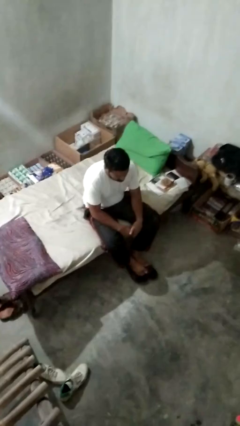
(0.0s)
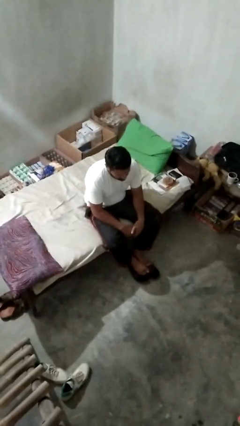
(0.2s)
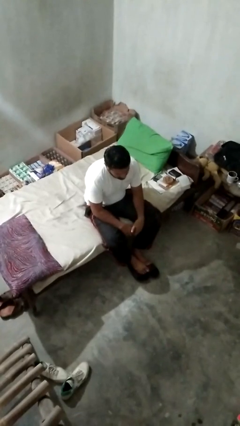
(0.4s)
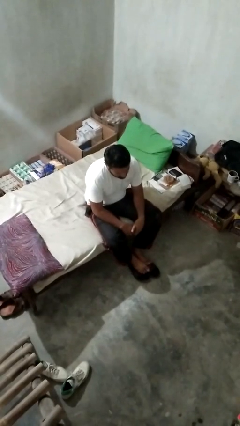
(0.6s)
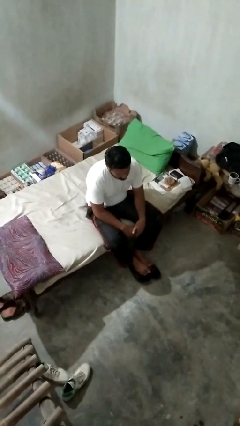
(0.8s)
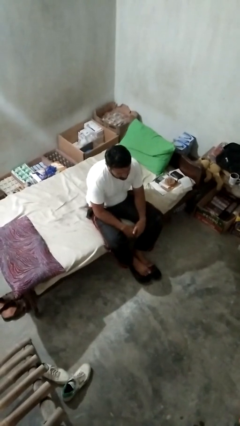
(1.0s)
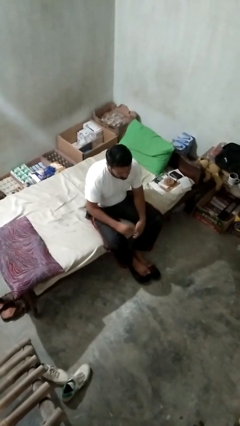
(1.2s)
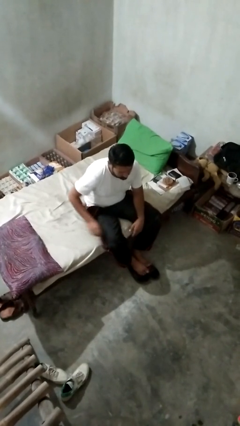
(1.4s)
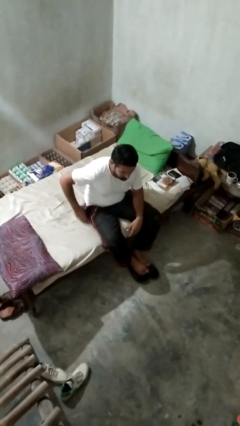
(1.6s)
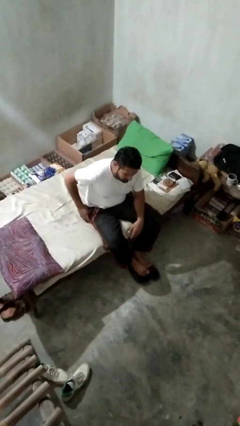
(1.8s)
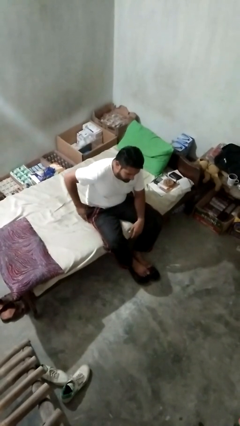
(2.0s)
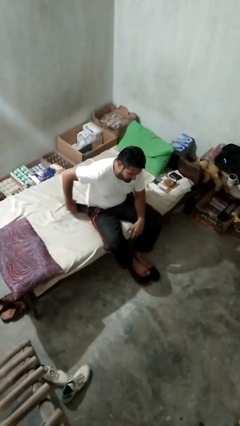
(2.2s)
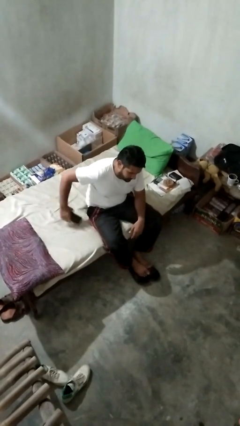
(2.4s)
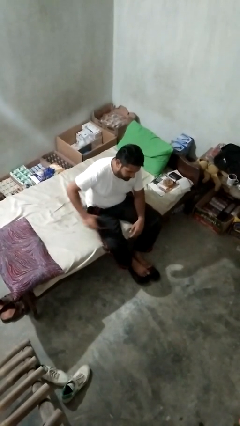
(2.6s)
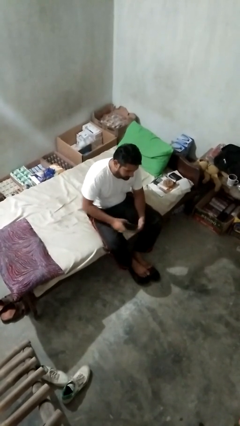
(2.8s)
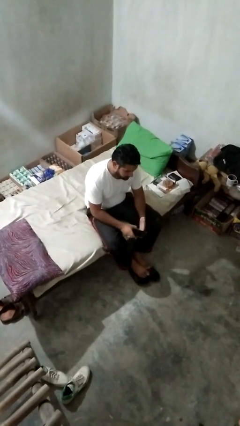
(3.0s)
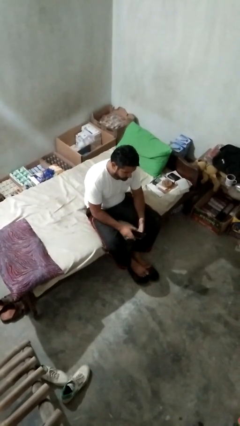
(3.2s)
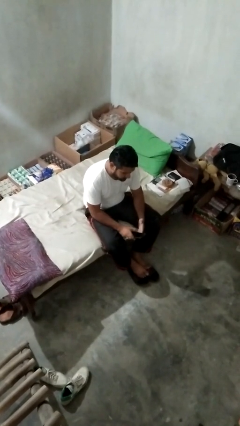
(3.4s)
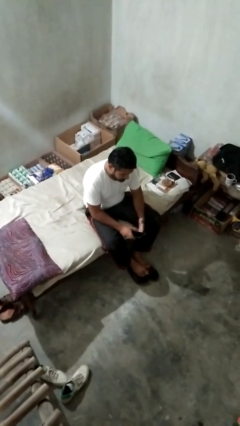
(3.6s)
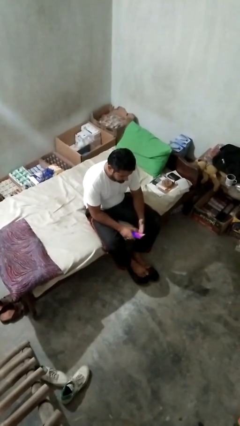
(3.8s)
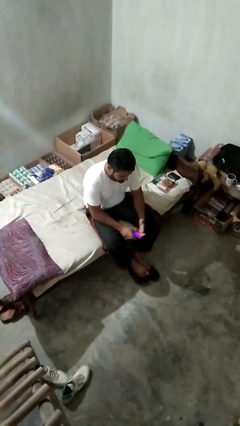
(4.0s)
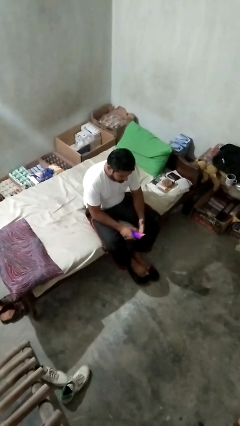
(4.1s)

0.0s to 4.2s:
person takes phone from pocket

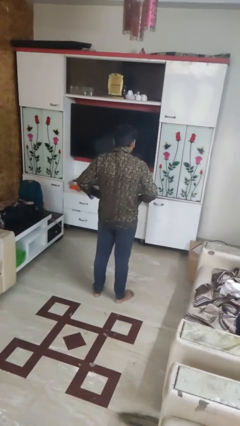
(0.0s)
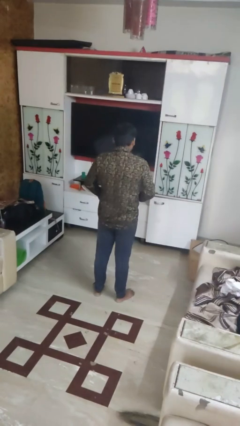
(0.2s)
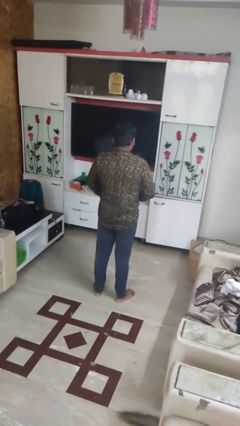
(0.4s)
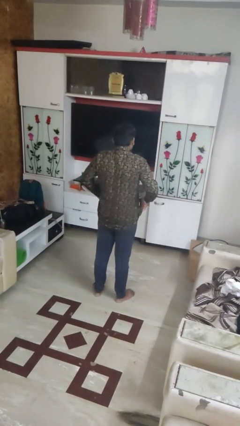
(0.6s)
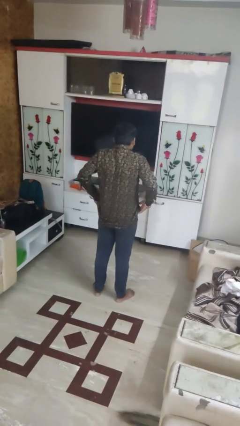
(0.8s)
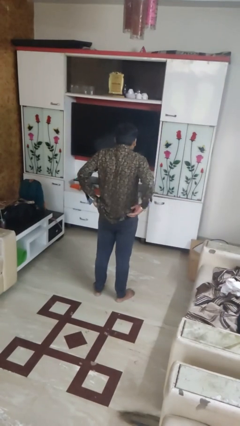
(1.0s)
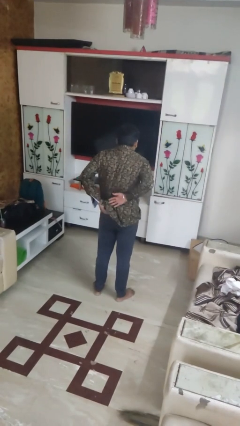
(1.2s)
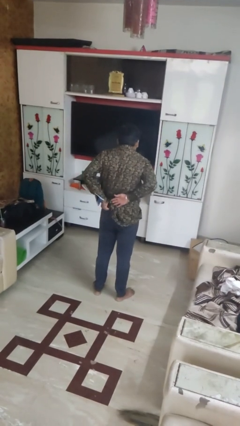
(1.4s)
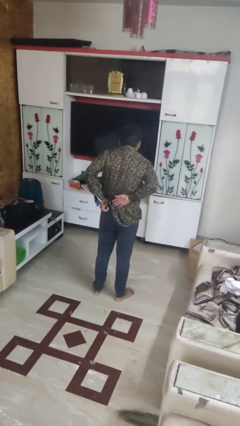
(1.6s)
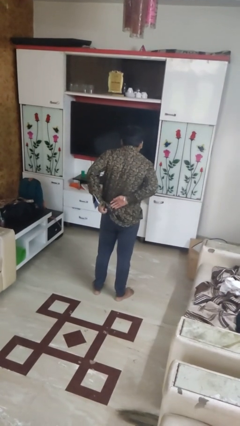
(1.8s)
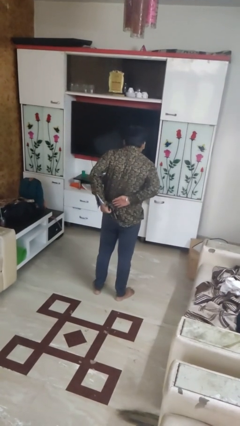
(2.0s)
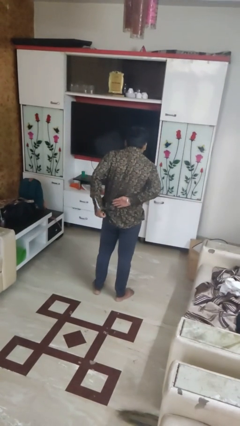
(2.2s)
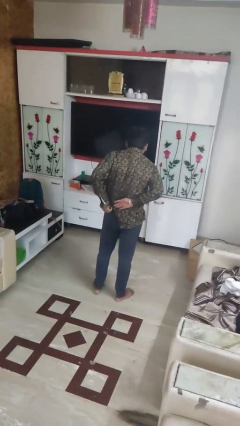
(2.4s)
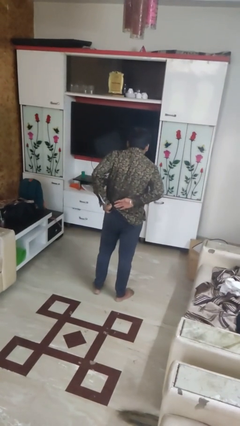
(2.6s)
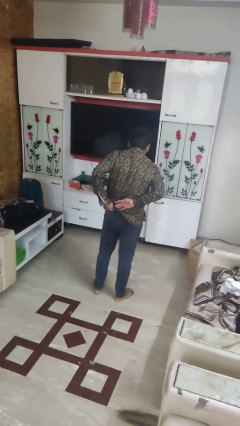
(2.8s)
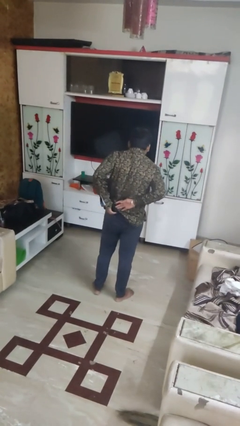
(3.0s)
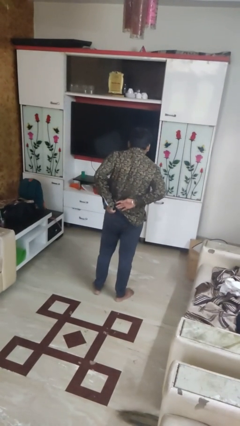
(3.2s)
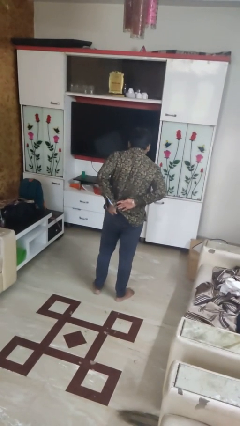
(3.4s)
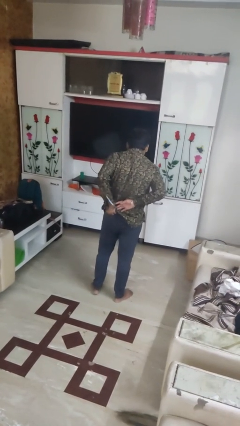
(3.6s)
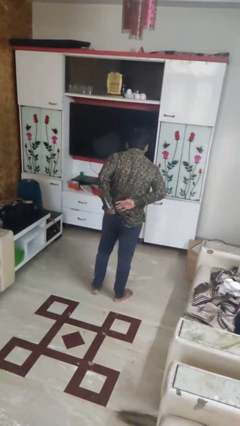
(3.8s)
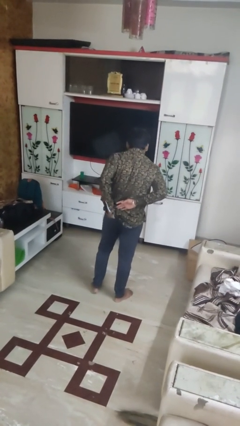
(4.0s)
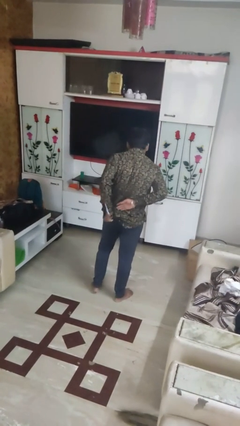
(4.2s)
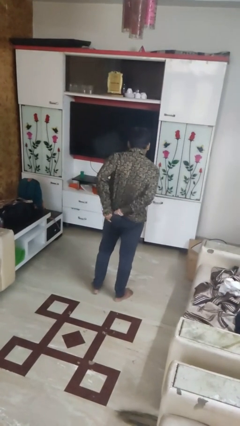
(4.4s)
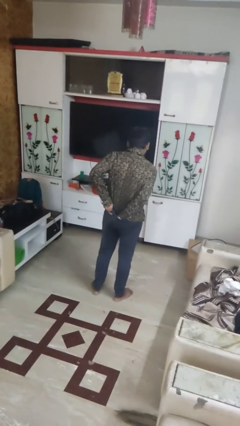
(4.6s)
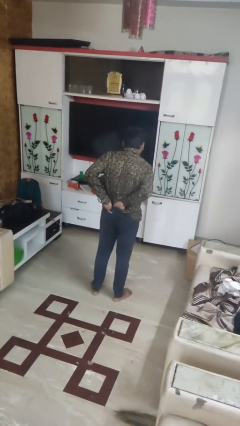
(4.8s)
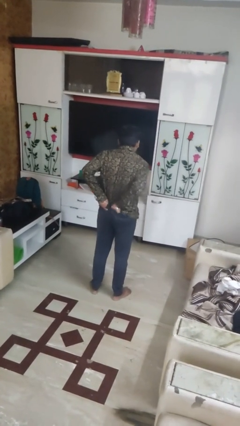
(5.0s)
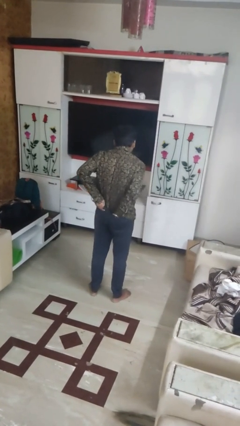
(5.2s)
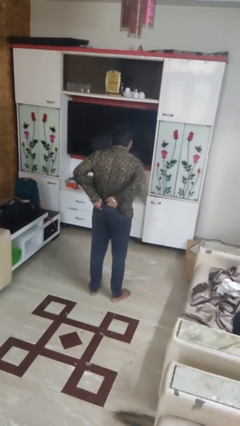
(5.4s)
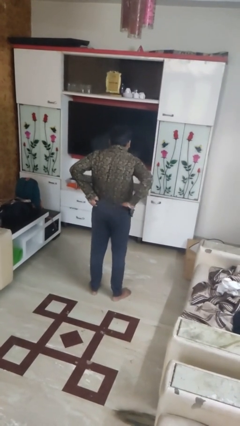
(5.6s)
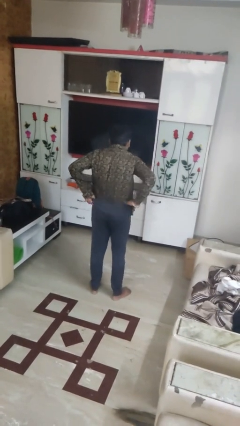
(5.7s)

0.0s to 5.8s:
person tucks in shirt

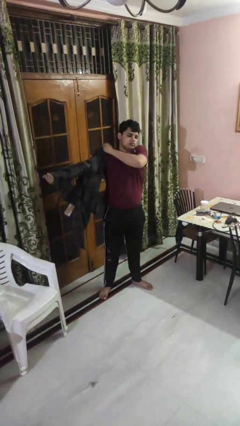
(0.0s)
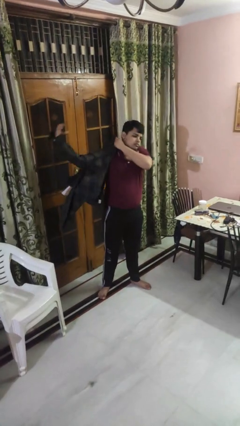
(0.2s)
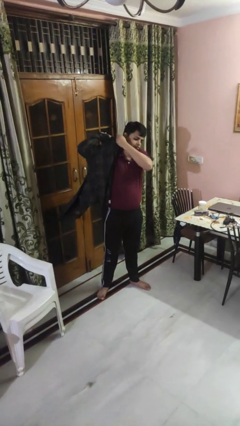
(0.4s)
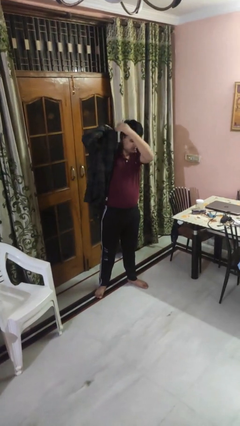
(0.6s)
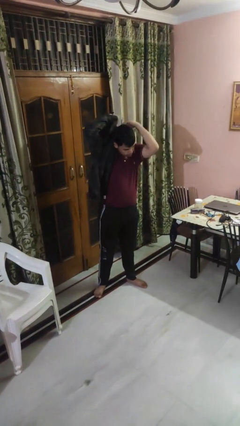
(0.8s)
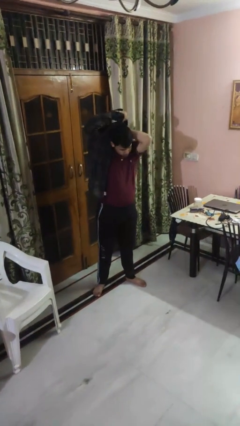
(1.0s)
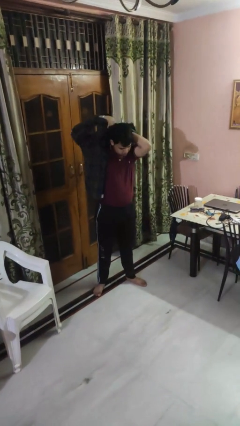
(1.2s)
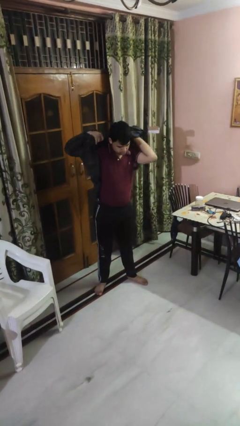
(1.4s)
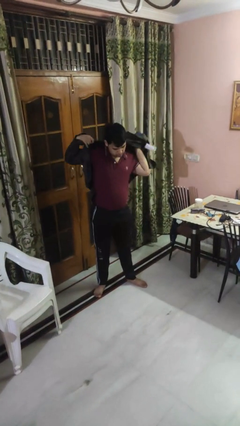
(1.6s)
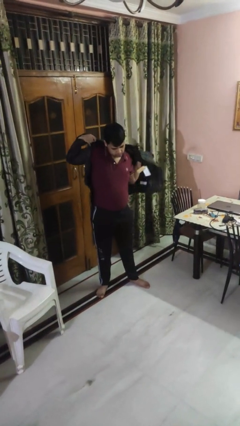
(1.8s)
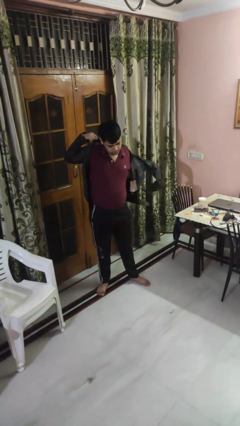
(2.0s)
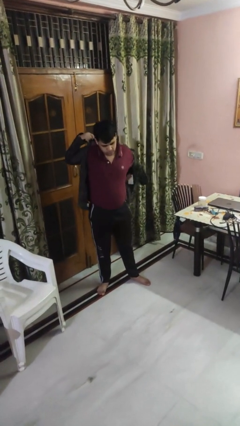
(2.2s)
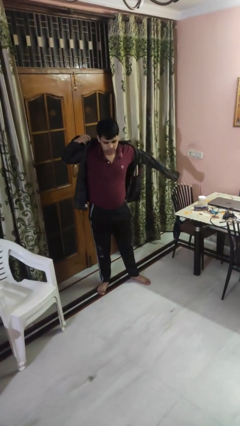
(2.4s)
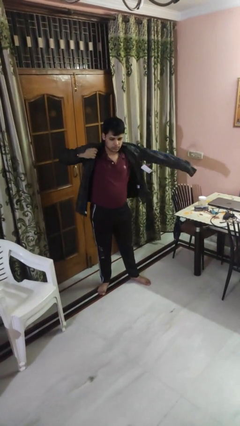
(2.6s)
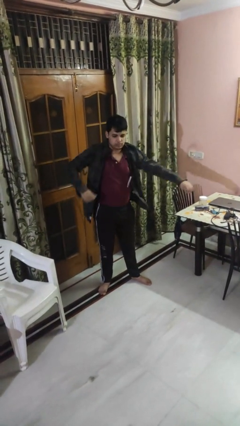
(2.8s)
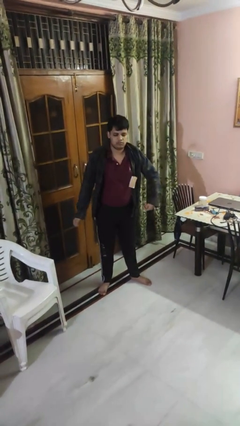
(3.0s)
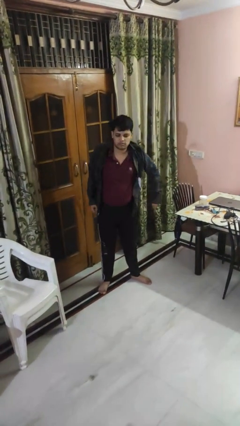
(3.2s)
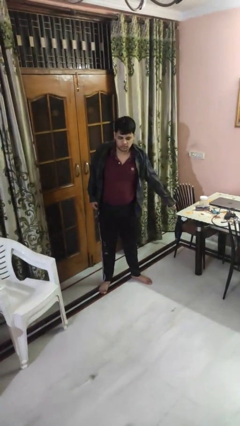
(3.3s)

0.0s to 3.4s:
person puts on shirt

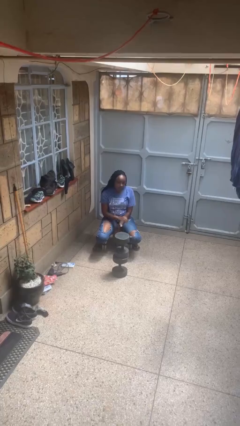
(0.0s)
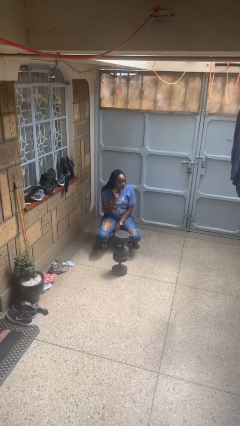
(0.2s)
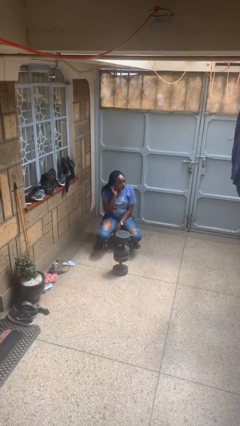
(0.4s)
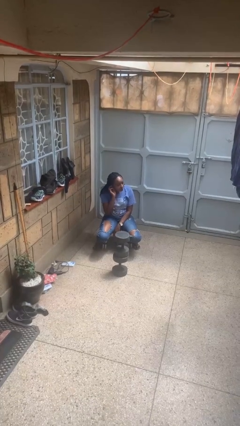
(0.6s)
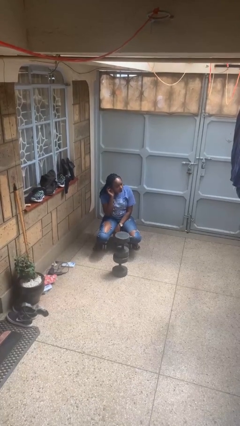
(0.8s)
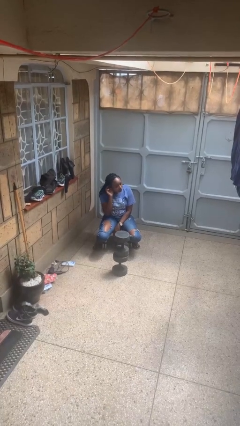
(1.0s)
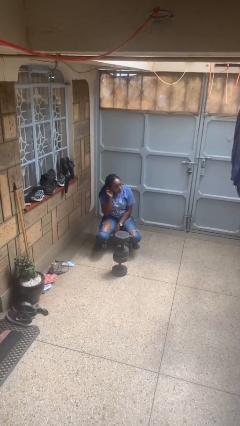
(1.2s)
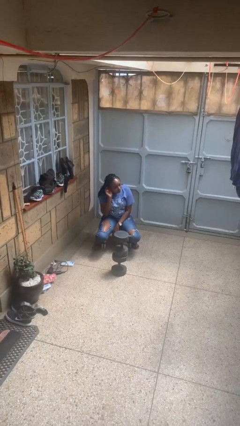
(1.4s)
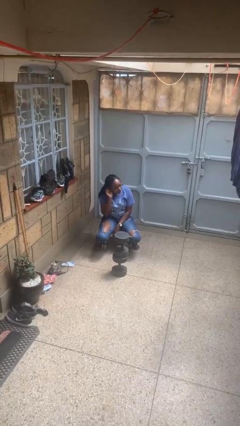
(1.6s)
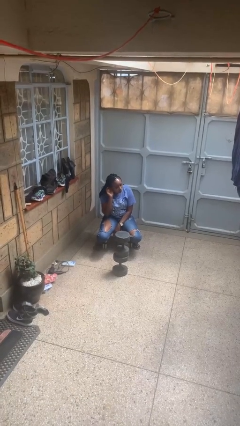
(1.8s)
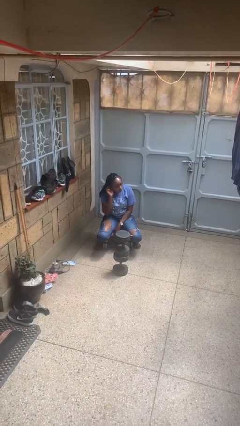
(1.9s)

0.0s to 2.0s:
person gestures listen closely

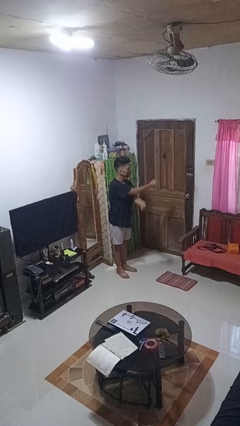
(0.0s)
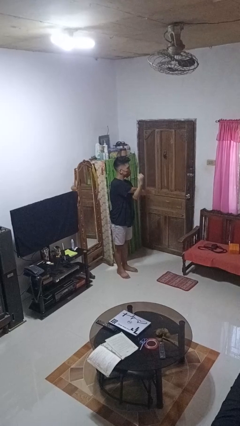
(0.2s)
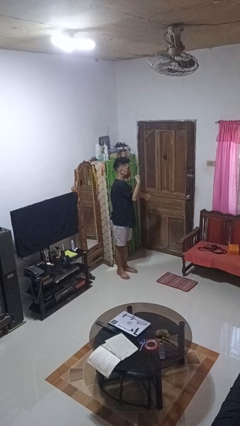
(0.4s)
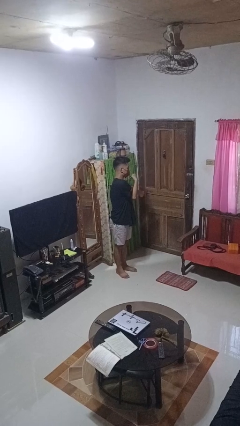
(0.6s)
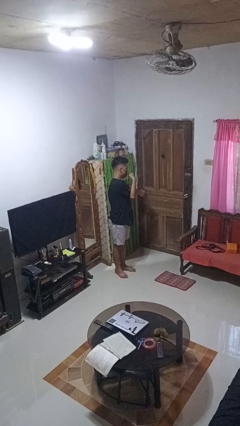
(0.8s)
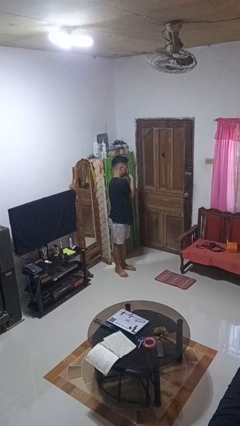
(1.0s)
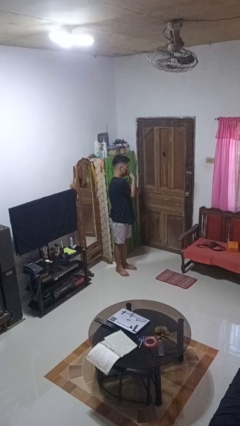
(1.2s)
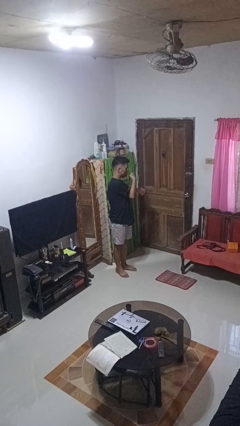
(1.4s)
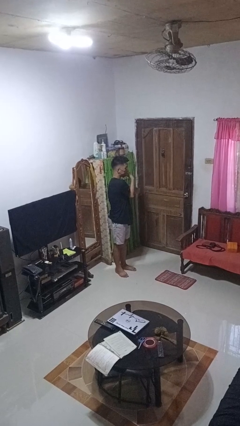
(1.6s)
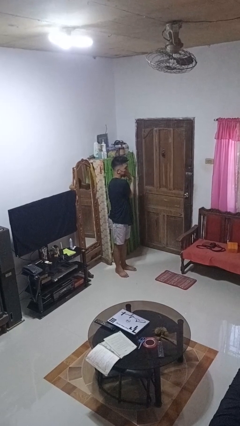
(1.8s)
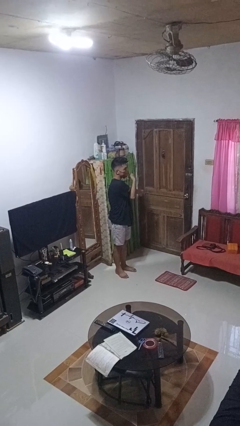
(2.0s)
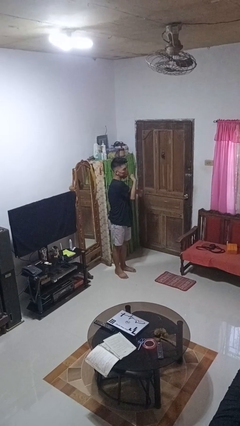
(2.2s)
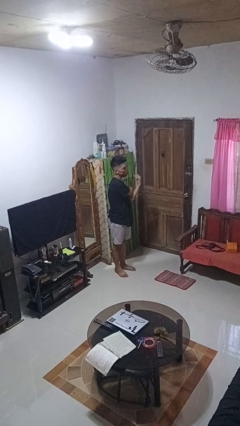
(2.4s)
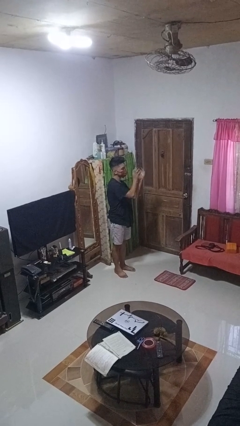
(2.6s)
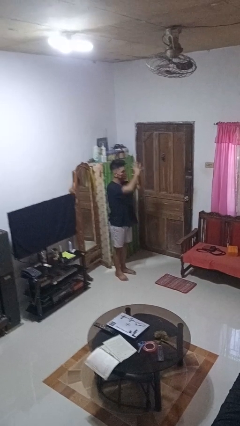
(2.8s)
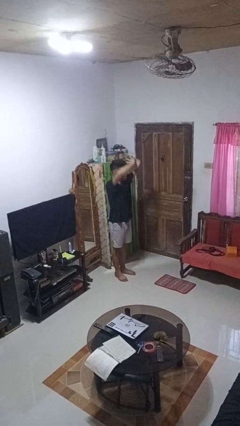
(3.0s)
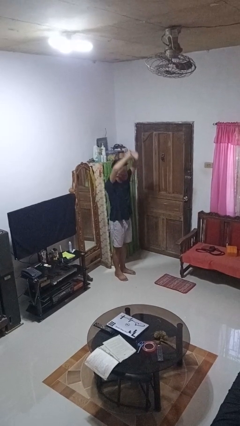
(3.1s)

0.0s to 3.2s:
person stretches arms to side
